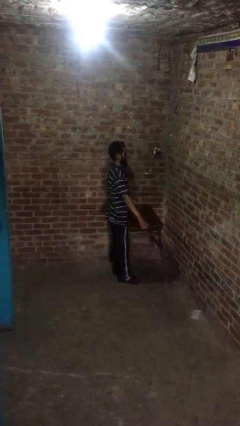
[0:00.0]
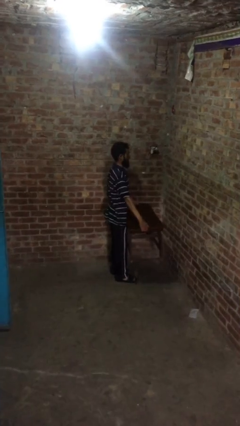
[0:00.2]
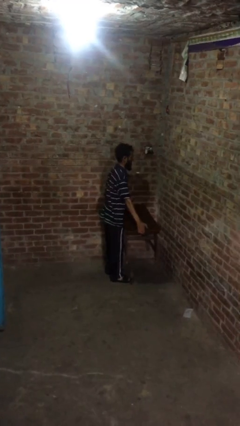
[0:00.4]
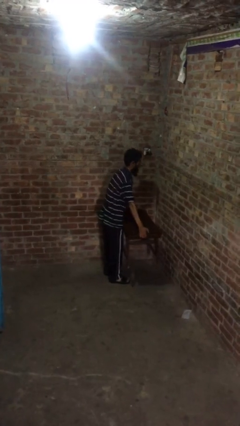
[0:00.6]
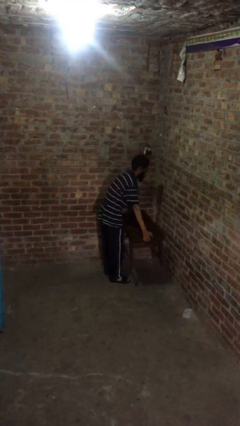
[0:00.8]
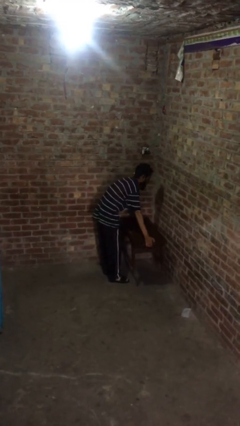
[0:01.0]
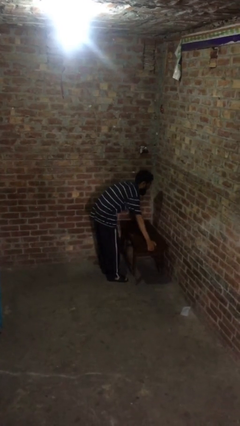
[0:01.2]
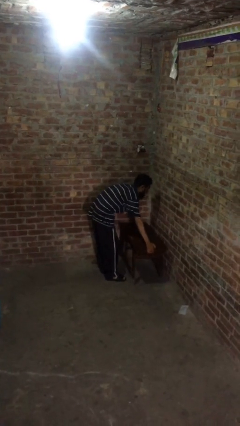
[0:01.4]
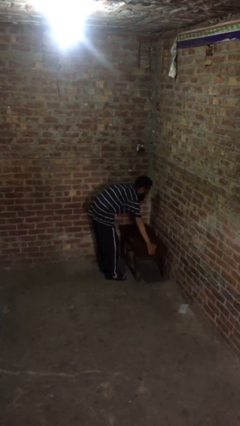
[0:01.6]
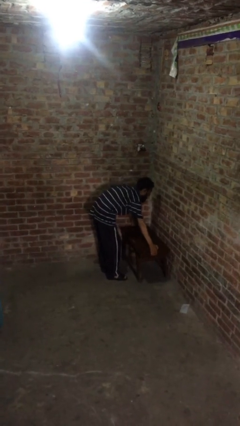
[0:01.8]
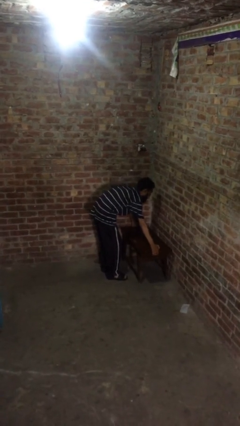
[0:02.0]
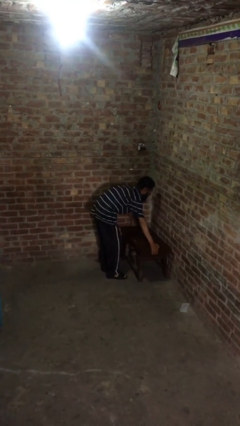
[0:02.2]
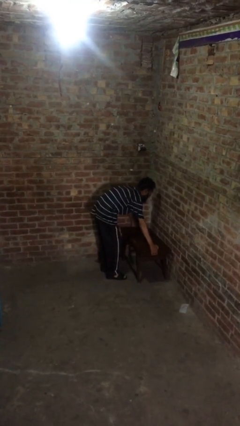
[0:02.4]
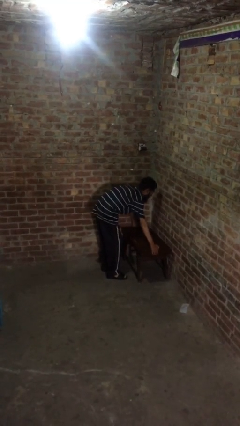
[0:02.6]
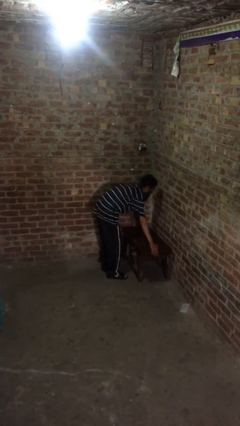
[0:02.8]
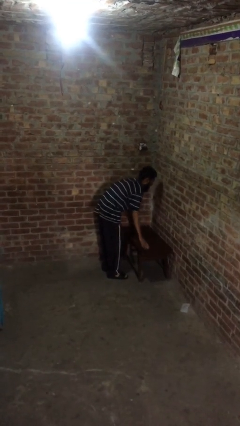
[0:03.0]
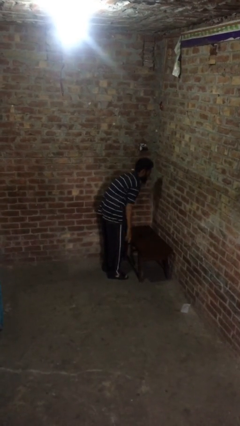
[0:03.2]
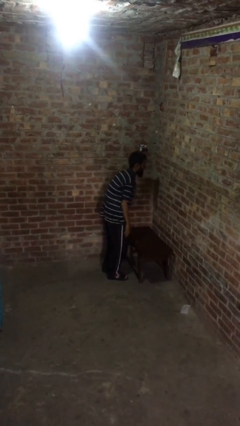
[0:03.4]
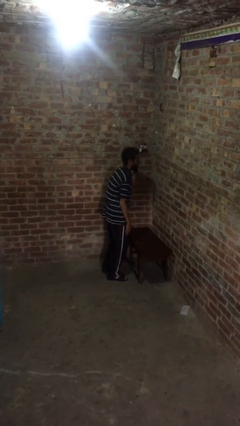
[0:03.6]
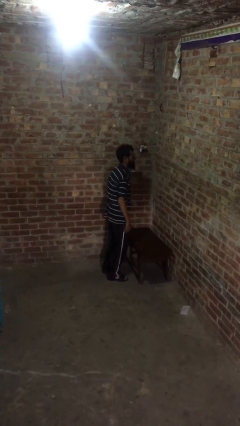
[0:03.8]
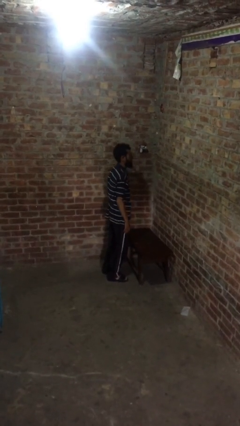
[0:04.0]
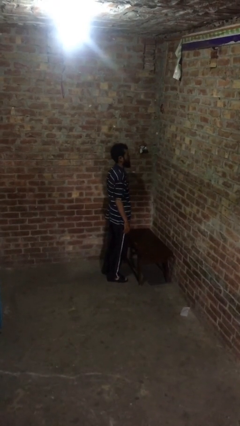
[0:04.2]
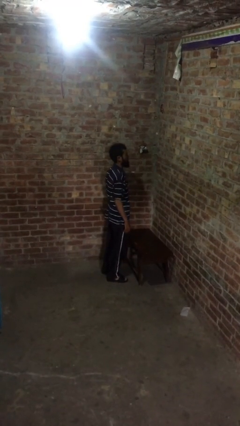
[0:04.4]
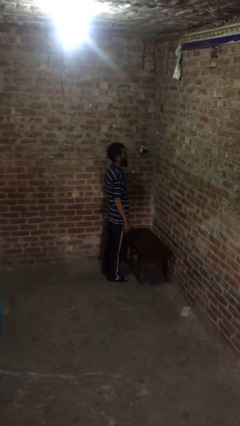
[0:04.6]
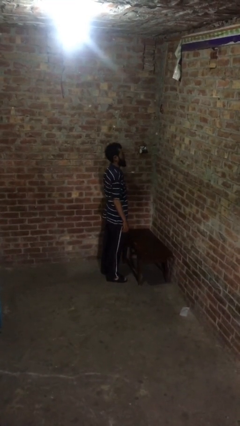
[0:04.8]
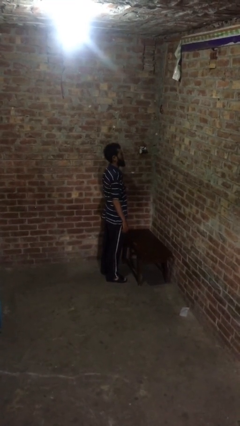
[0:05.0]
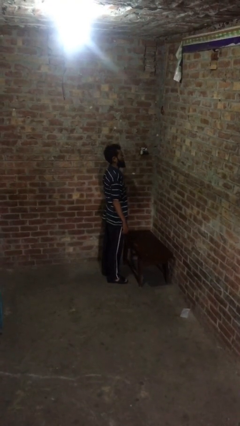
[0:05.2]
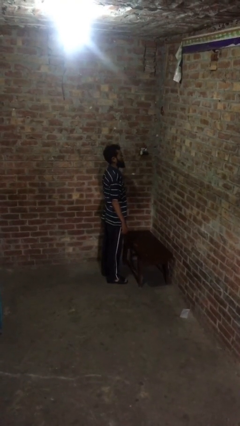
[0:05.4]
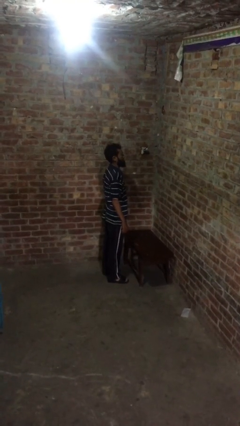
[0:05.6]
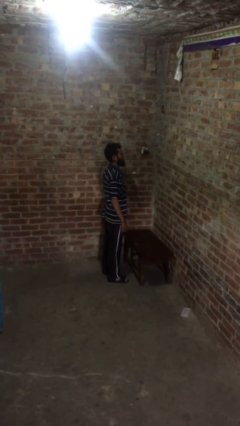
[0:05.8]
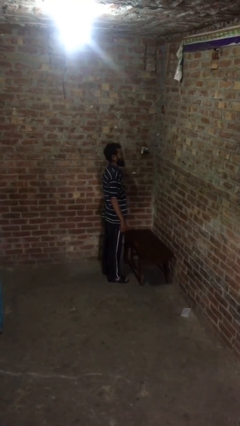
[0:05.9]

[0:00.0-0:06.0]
person puts down object on floor

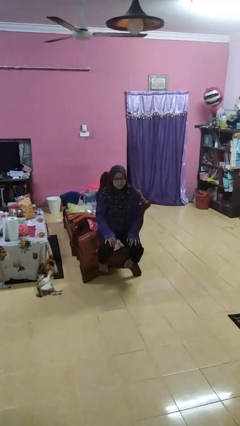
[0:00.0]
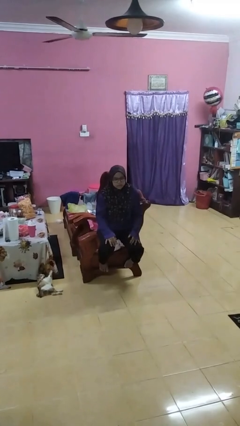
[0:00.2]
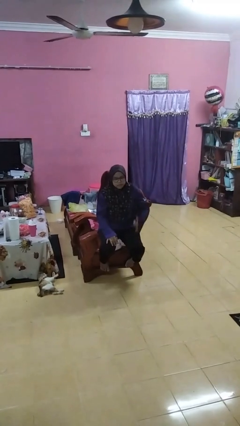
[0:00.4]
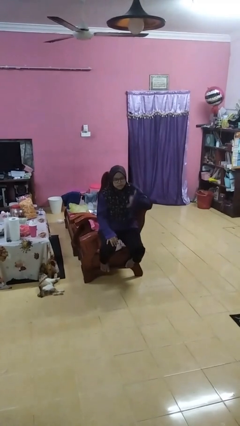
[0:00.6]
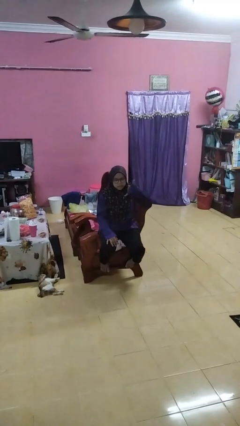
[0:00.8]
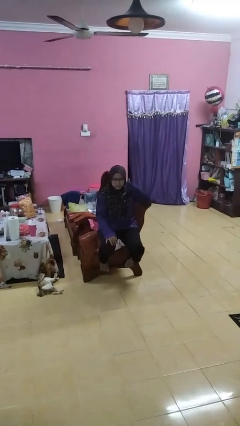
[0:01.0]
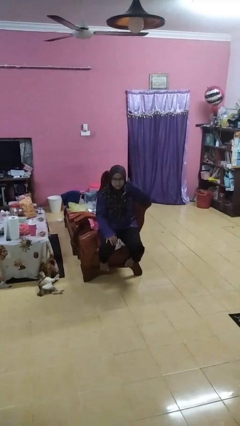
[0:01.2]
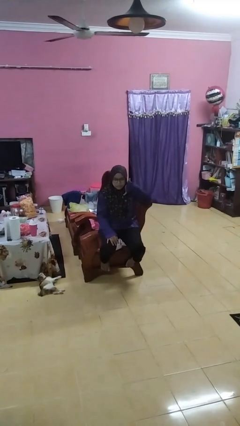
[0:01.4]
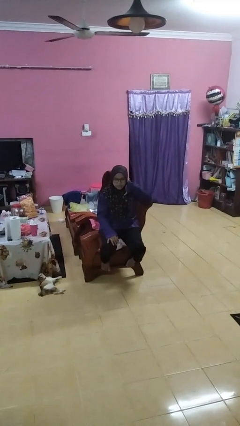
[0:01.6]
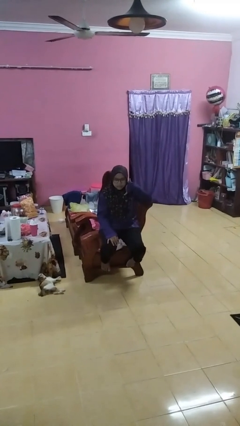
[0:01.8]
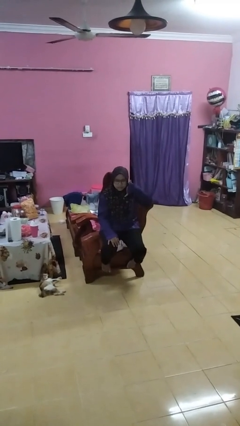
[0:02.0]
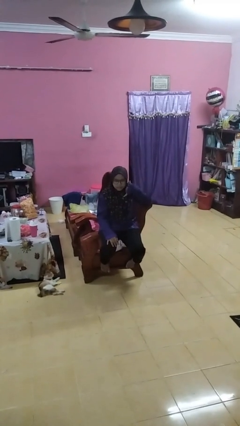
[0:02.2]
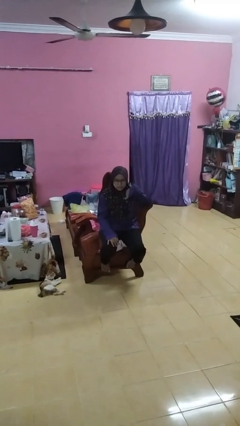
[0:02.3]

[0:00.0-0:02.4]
person gestures call me

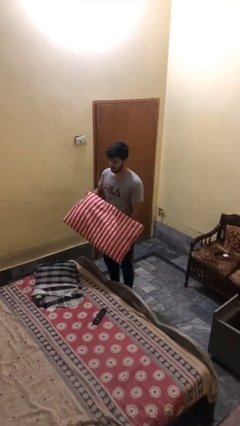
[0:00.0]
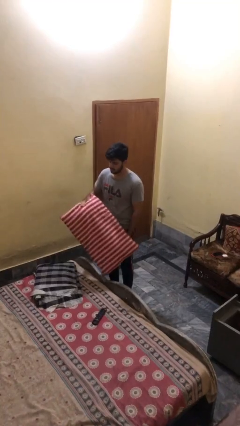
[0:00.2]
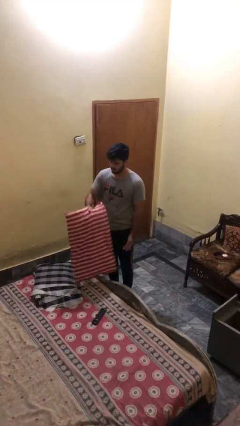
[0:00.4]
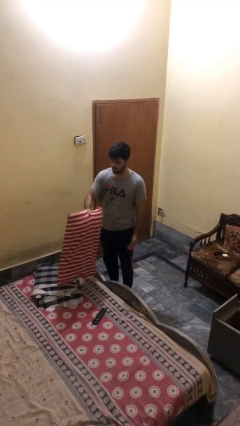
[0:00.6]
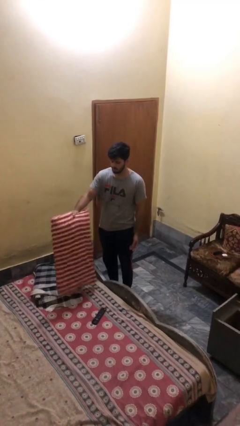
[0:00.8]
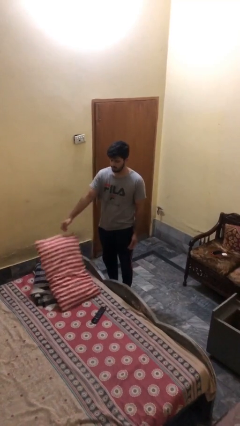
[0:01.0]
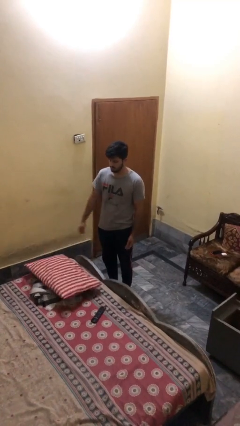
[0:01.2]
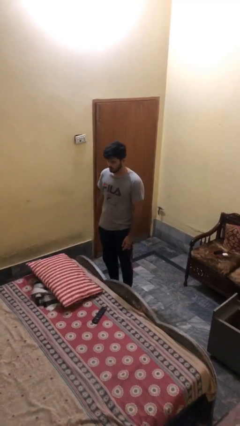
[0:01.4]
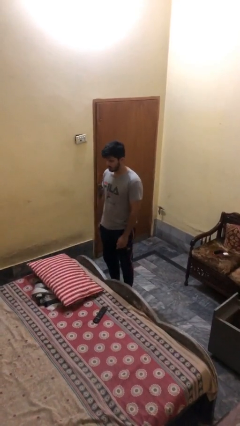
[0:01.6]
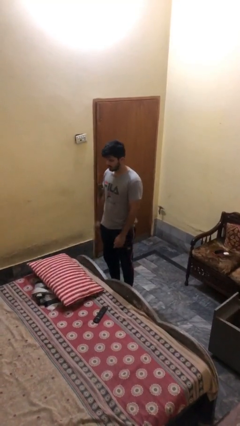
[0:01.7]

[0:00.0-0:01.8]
person puts down object on bed

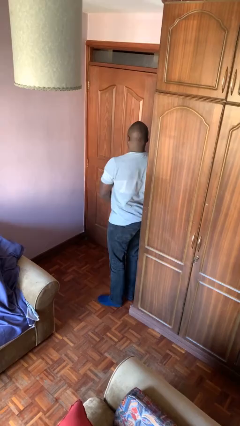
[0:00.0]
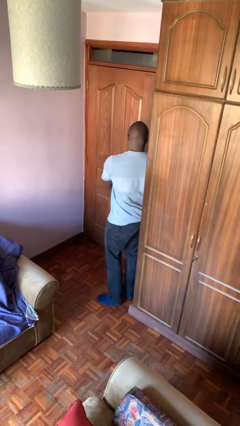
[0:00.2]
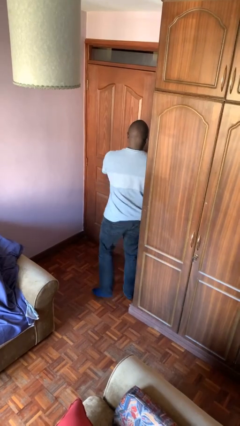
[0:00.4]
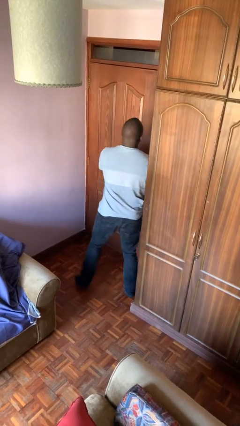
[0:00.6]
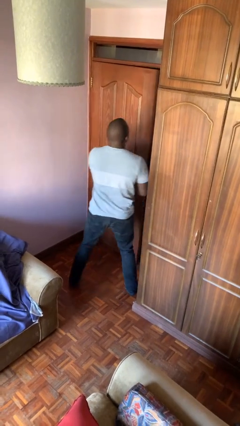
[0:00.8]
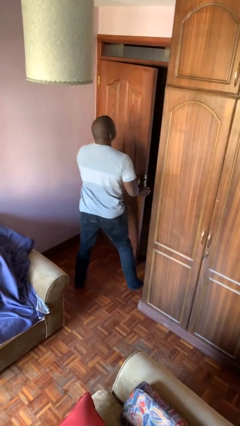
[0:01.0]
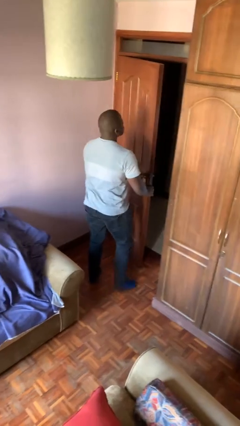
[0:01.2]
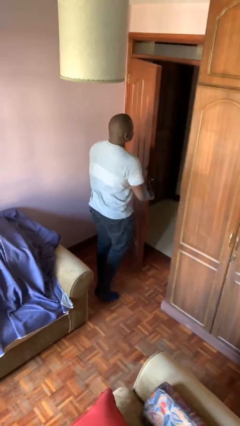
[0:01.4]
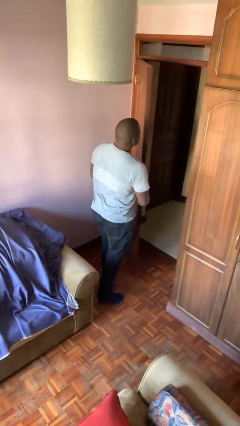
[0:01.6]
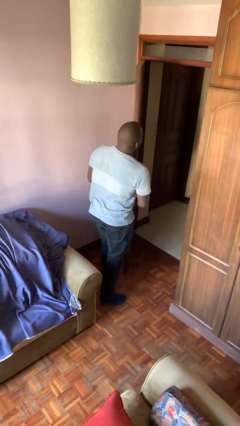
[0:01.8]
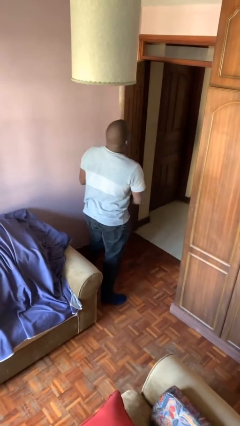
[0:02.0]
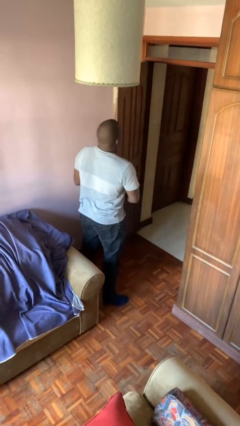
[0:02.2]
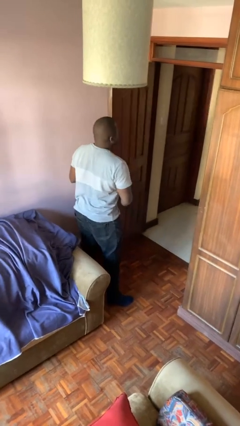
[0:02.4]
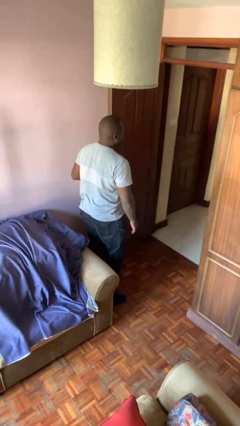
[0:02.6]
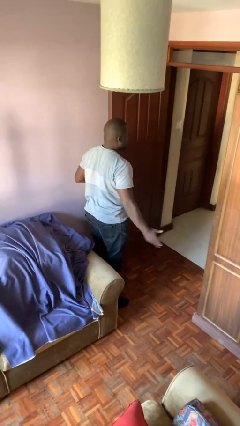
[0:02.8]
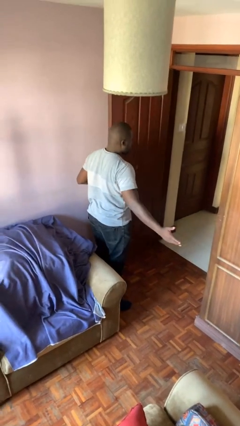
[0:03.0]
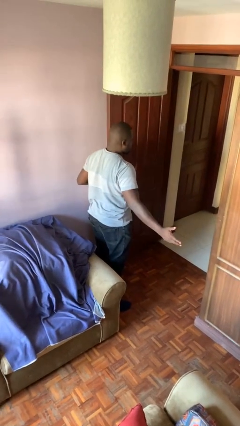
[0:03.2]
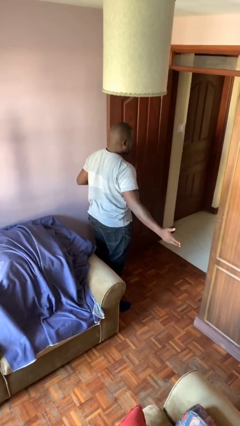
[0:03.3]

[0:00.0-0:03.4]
person opens facility door

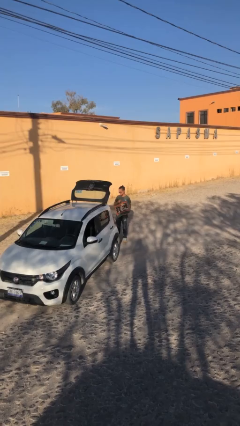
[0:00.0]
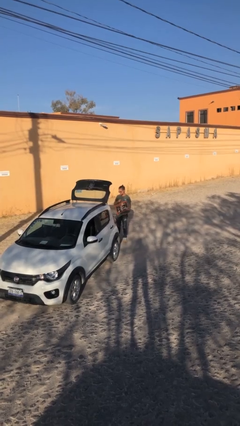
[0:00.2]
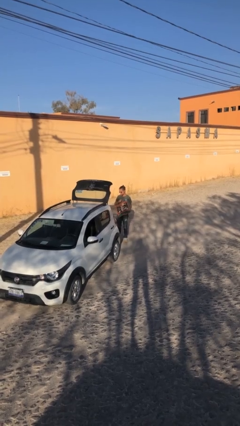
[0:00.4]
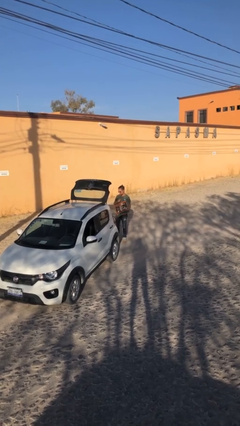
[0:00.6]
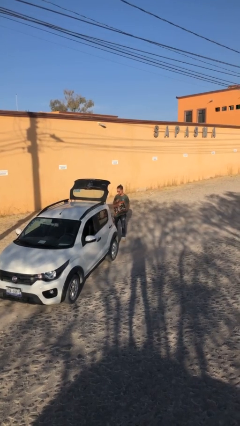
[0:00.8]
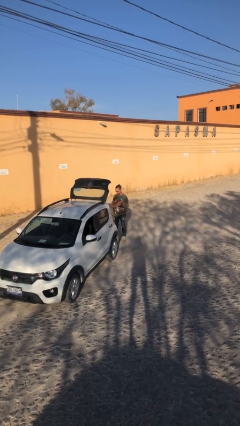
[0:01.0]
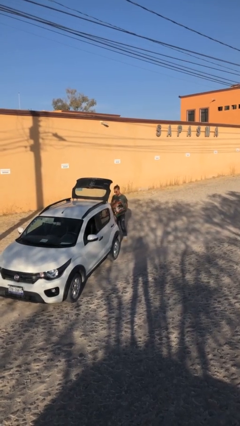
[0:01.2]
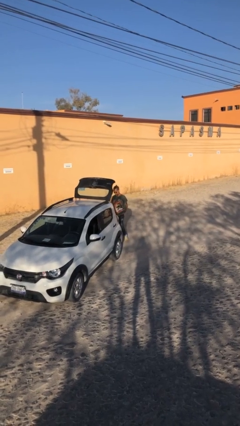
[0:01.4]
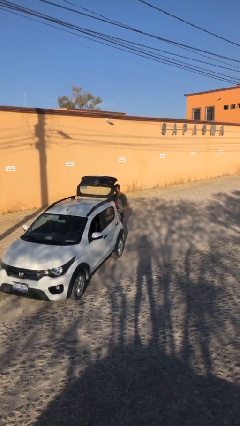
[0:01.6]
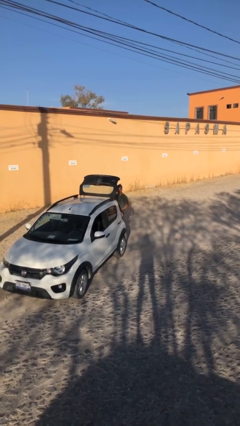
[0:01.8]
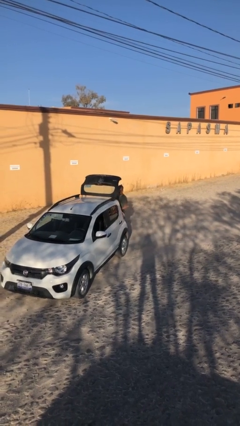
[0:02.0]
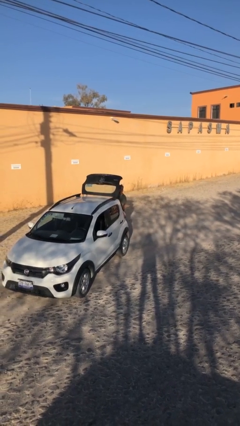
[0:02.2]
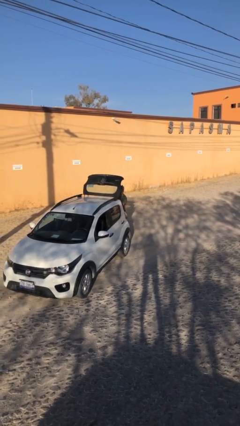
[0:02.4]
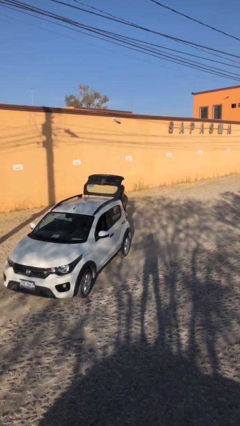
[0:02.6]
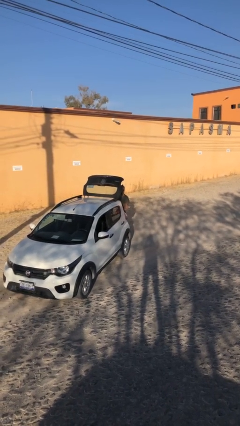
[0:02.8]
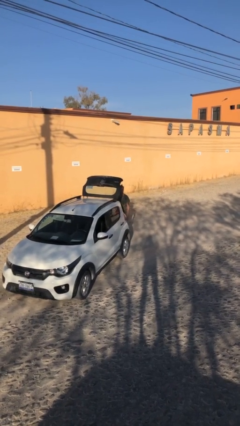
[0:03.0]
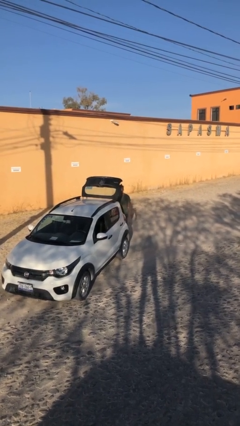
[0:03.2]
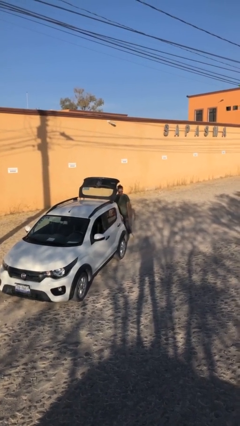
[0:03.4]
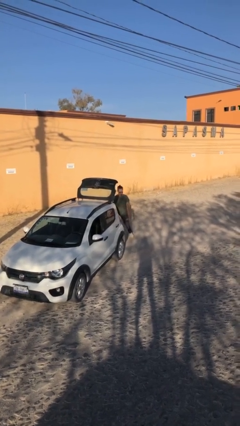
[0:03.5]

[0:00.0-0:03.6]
person loads car

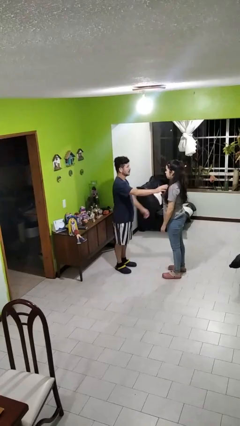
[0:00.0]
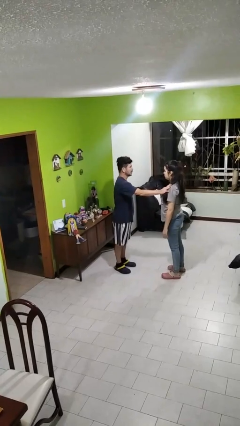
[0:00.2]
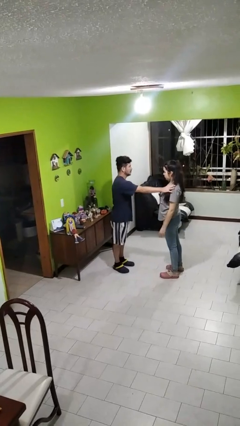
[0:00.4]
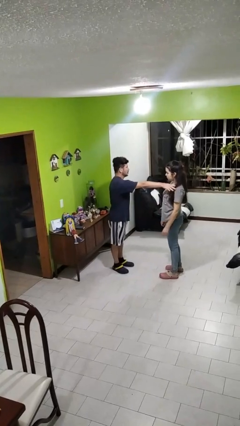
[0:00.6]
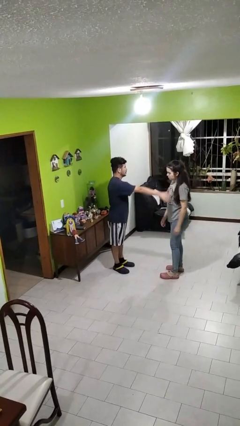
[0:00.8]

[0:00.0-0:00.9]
person shoves person
